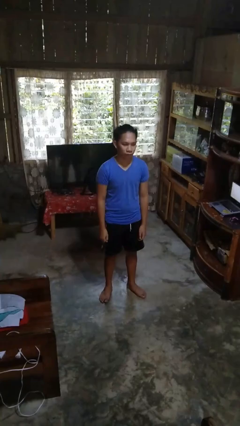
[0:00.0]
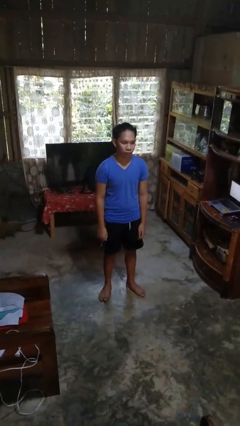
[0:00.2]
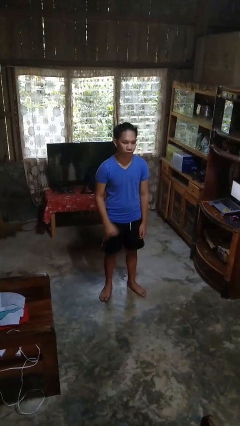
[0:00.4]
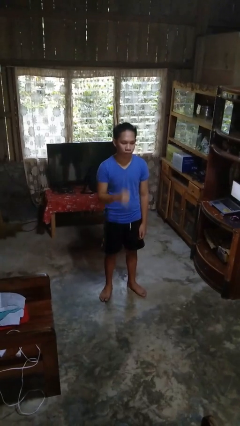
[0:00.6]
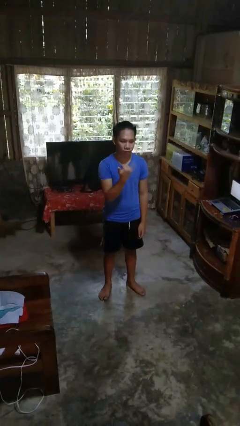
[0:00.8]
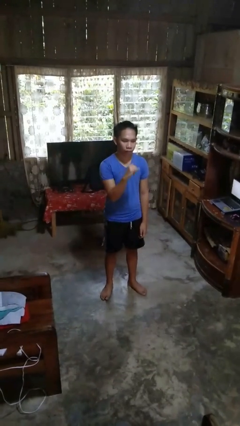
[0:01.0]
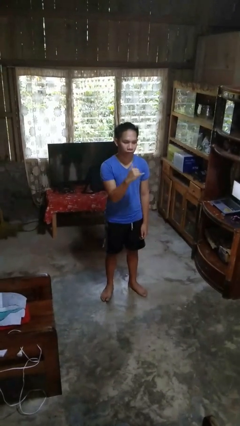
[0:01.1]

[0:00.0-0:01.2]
person gestures hang loose

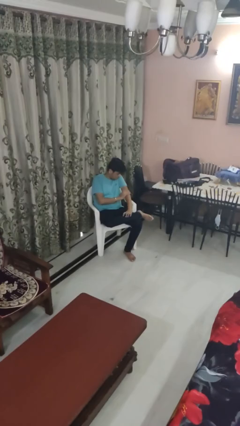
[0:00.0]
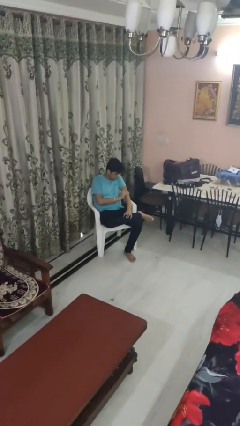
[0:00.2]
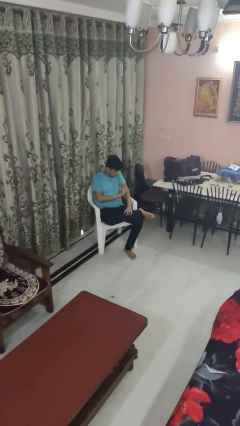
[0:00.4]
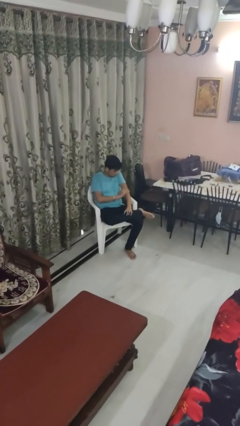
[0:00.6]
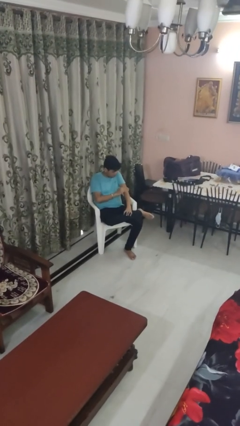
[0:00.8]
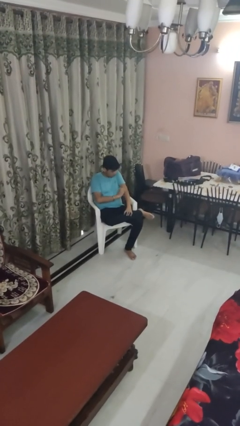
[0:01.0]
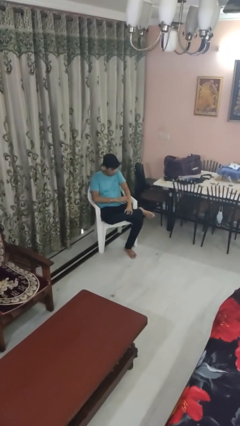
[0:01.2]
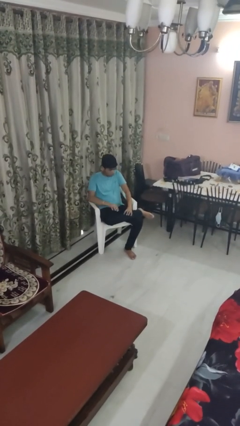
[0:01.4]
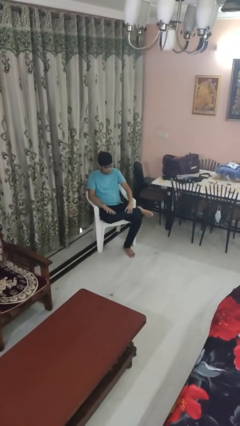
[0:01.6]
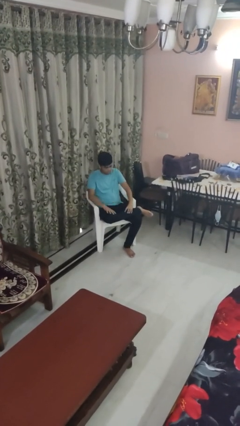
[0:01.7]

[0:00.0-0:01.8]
person swats bug

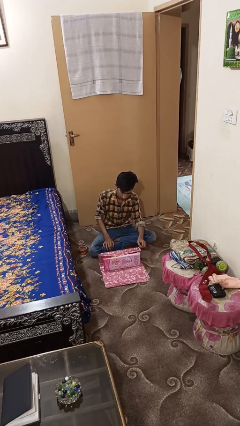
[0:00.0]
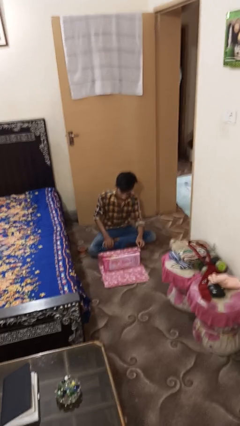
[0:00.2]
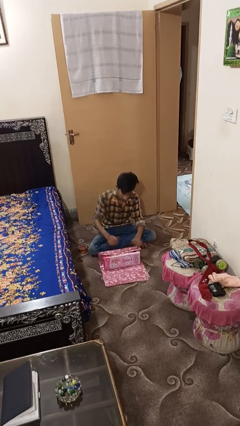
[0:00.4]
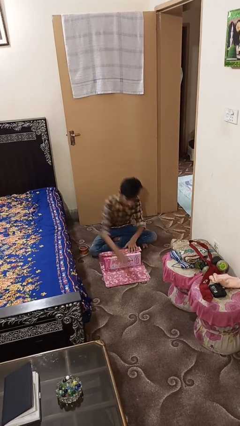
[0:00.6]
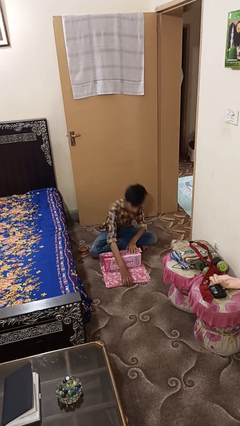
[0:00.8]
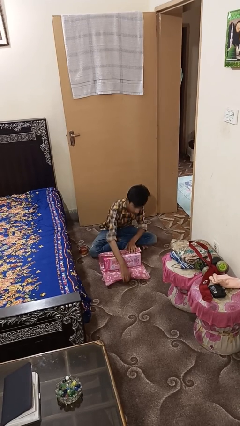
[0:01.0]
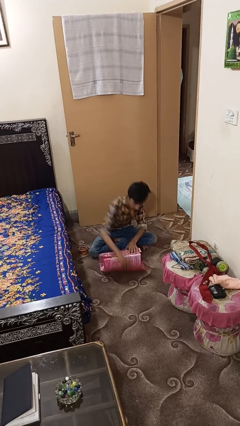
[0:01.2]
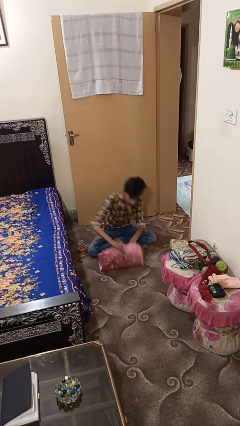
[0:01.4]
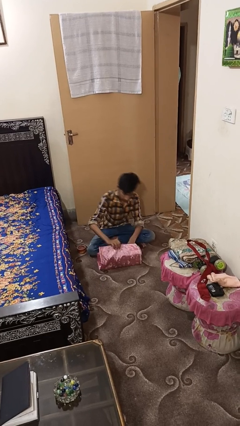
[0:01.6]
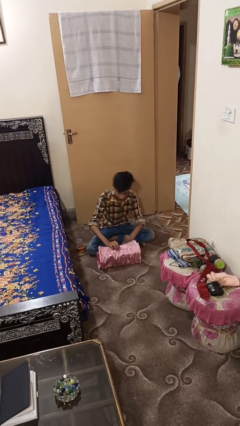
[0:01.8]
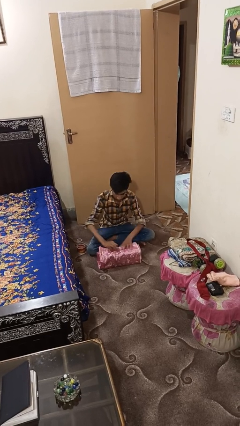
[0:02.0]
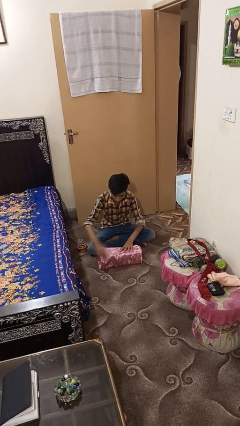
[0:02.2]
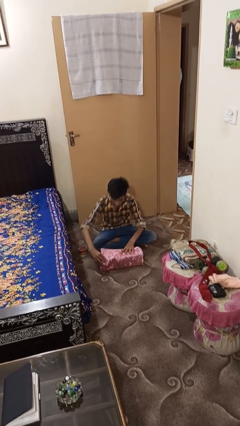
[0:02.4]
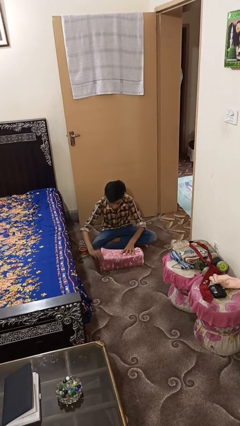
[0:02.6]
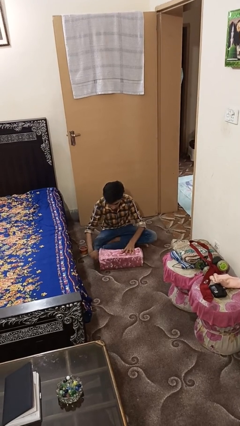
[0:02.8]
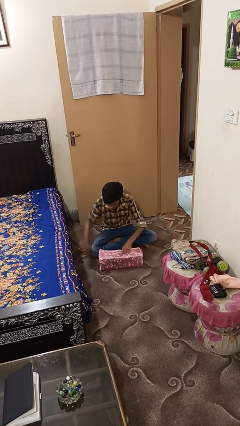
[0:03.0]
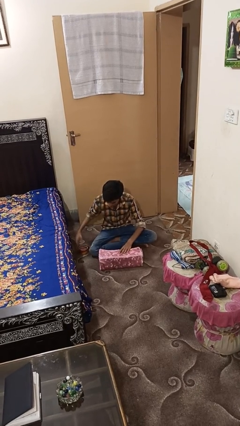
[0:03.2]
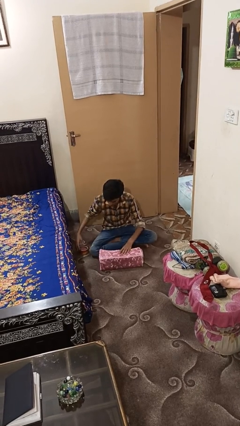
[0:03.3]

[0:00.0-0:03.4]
person wraps box

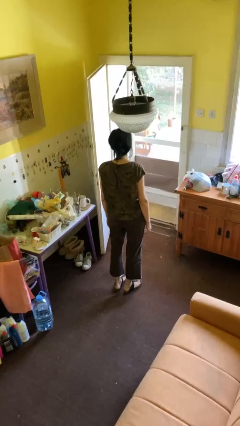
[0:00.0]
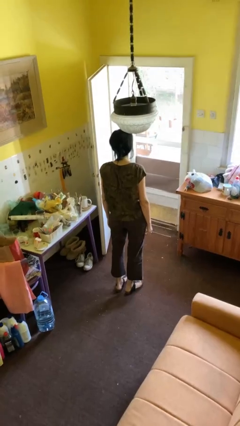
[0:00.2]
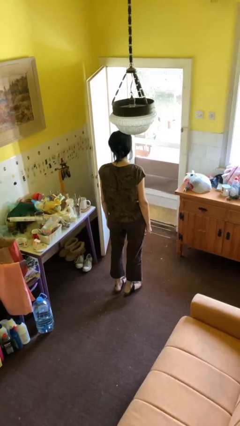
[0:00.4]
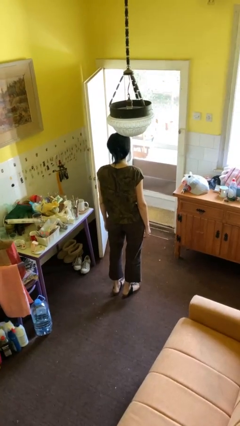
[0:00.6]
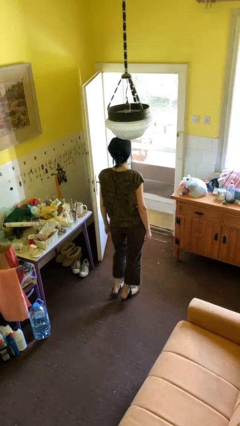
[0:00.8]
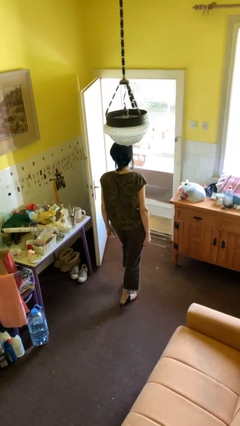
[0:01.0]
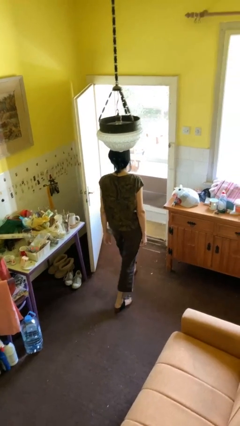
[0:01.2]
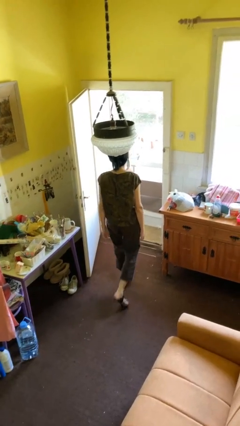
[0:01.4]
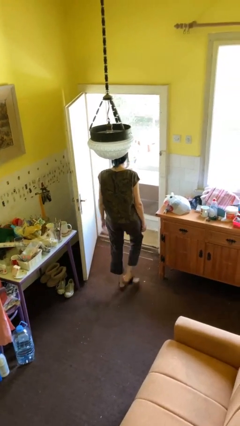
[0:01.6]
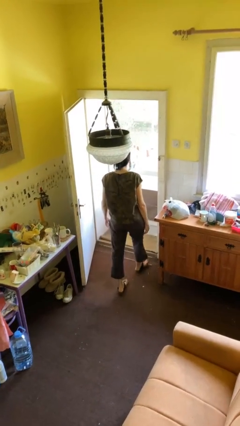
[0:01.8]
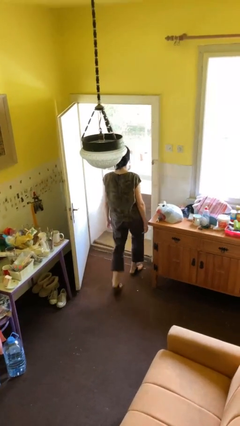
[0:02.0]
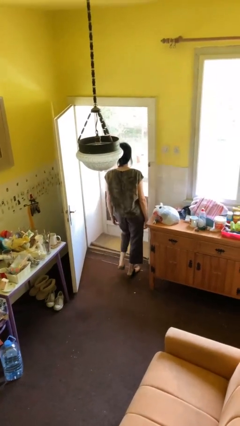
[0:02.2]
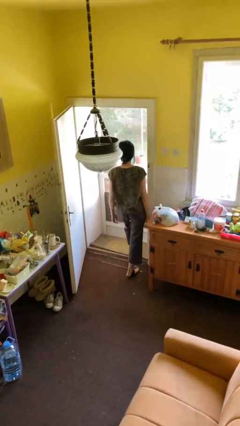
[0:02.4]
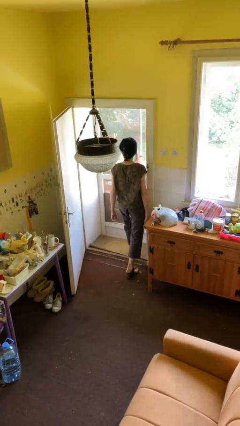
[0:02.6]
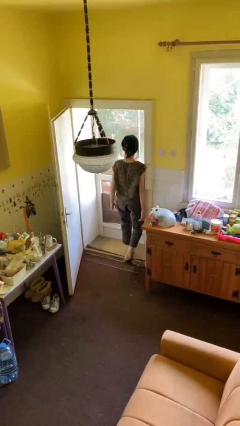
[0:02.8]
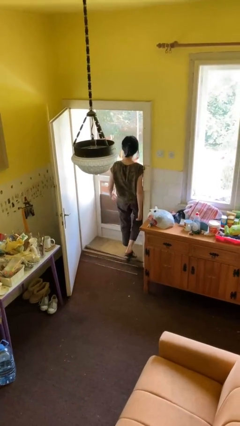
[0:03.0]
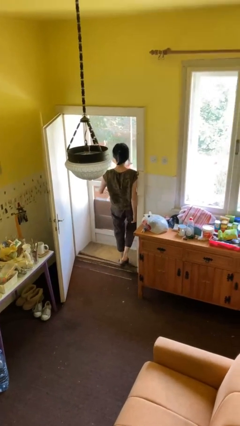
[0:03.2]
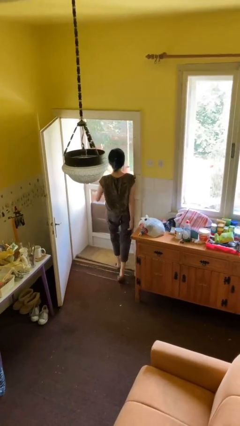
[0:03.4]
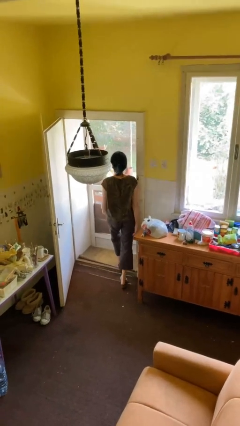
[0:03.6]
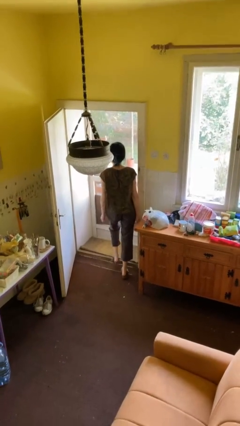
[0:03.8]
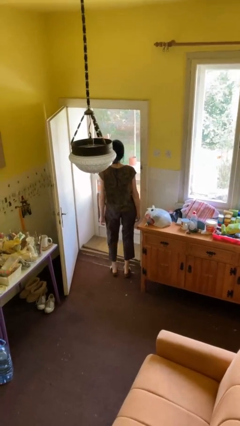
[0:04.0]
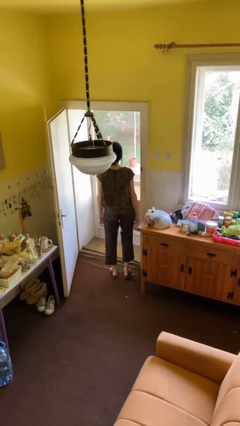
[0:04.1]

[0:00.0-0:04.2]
person bumps into wall

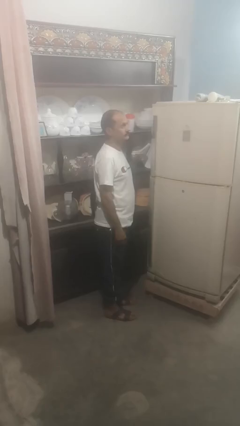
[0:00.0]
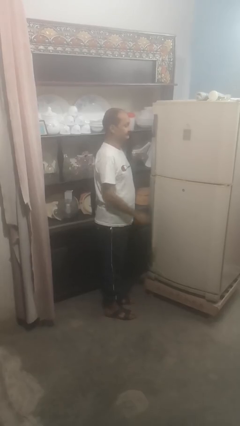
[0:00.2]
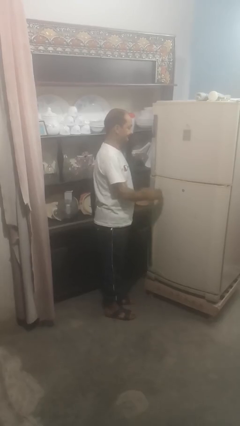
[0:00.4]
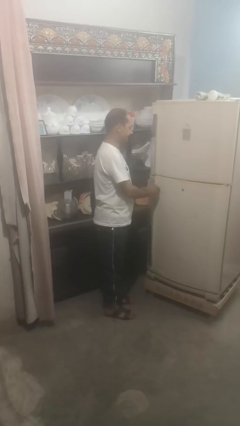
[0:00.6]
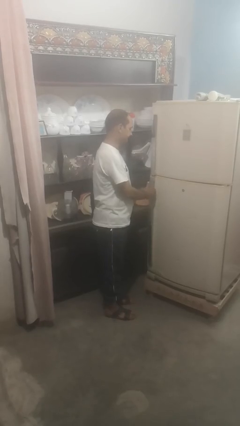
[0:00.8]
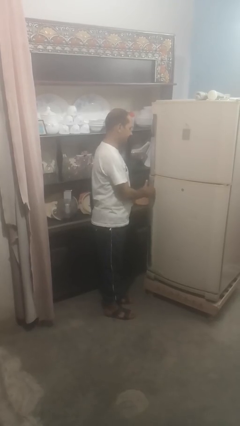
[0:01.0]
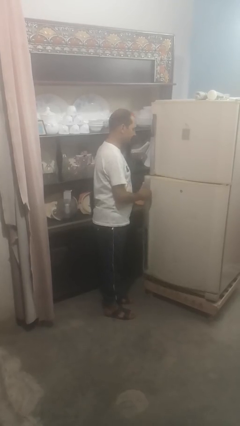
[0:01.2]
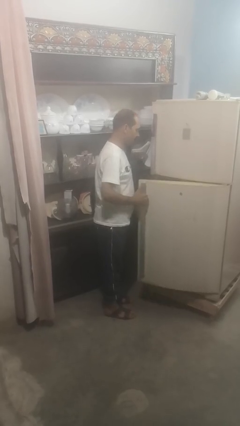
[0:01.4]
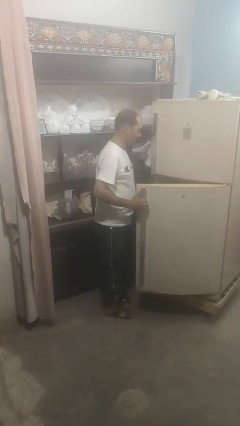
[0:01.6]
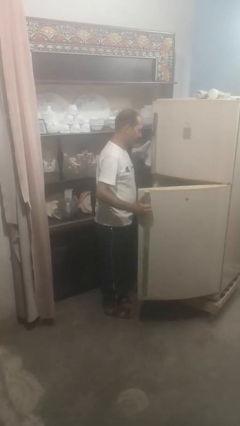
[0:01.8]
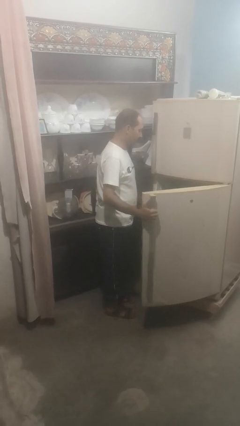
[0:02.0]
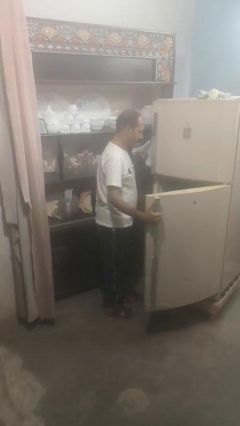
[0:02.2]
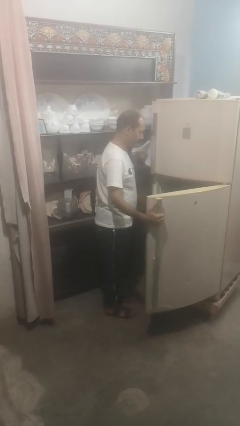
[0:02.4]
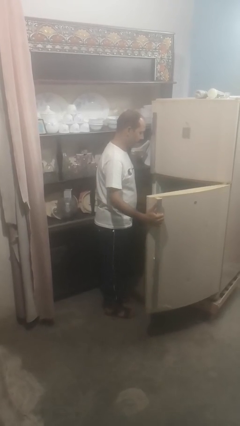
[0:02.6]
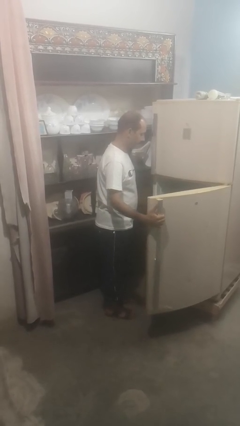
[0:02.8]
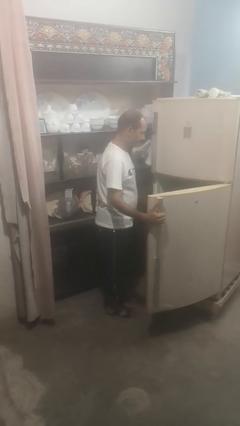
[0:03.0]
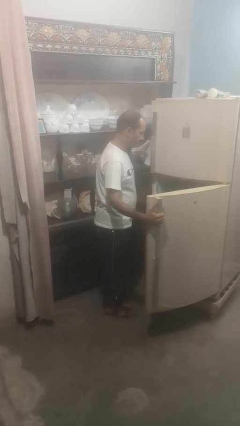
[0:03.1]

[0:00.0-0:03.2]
person opens refrigerator

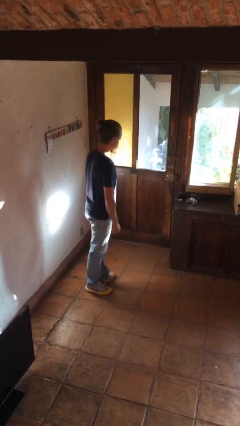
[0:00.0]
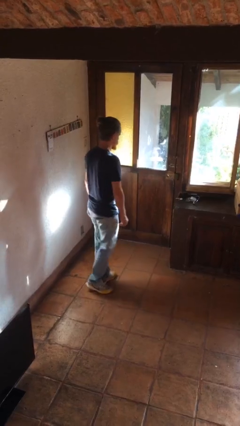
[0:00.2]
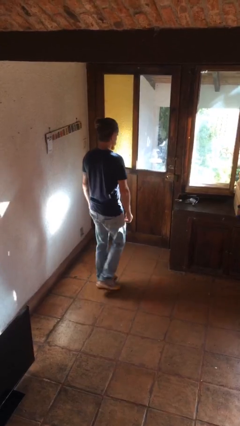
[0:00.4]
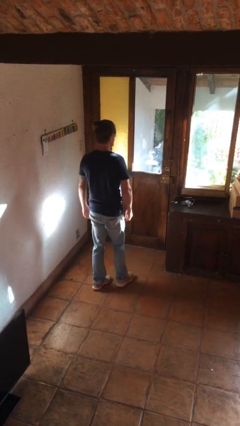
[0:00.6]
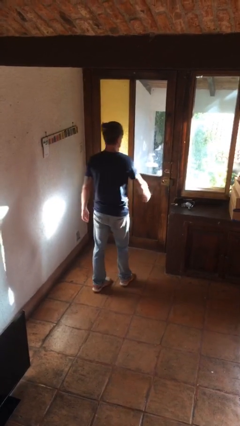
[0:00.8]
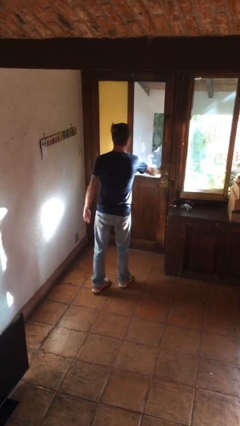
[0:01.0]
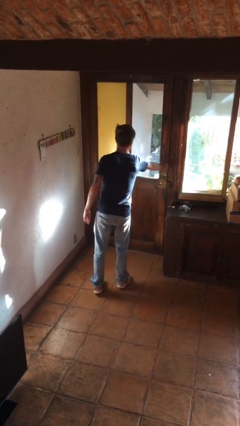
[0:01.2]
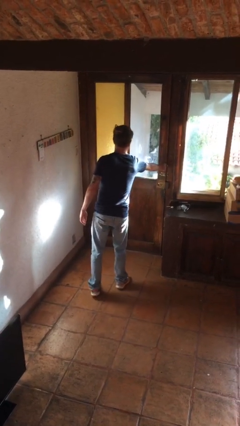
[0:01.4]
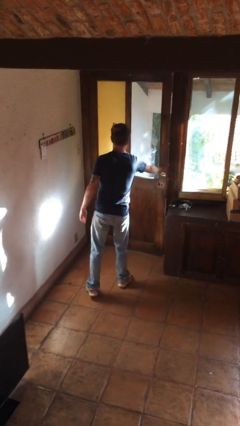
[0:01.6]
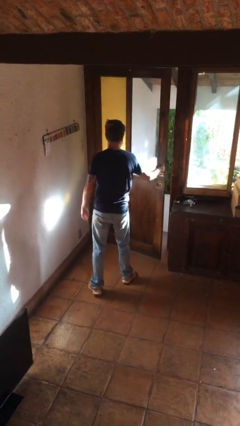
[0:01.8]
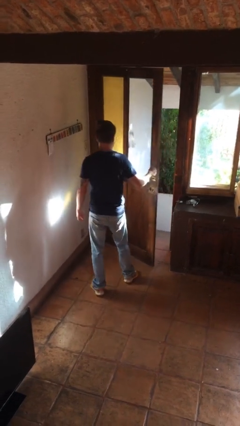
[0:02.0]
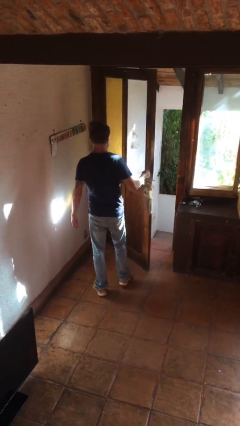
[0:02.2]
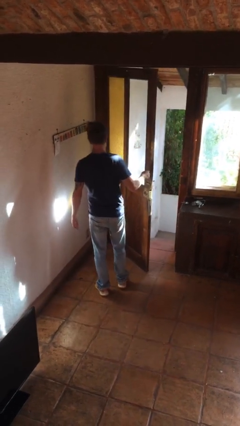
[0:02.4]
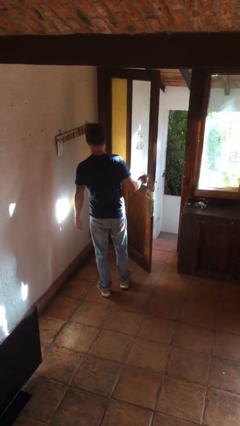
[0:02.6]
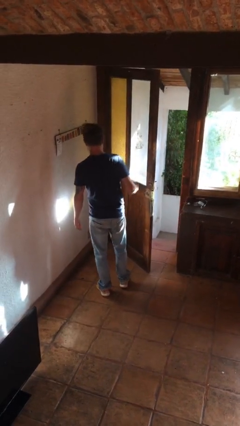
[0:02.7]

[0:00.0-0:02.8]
person opens facility door

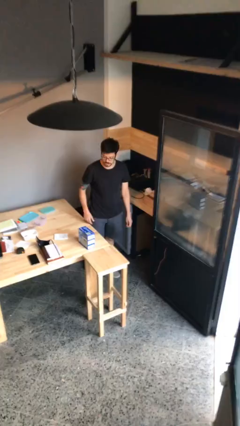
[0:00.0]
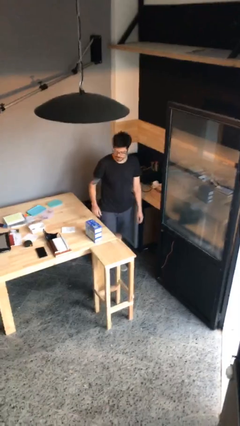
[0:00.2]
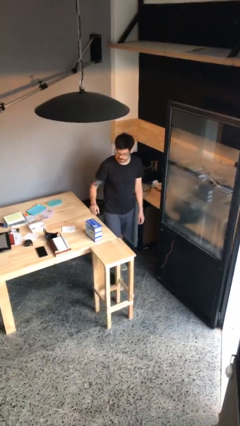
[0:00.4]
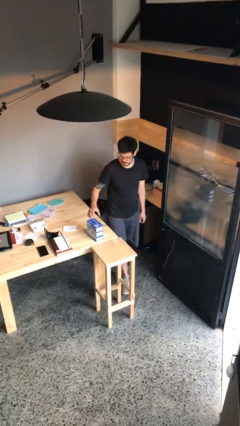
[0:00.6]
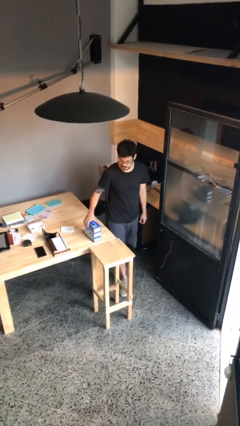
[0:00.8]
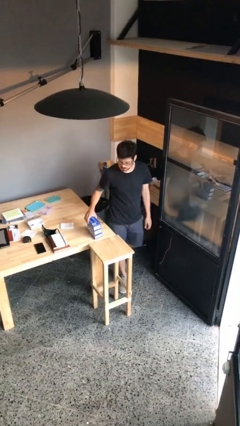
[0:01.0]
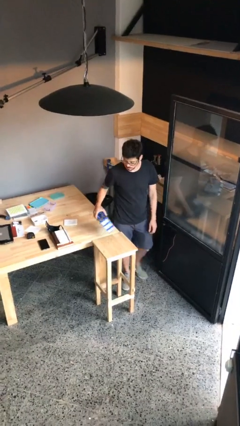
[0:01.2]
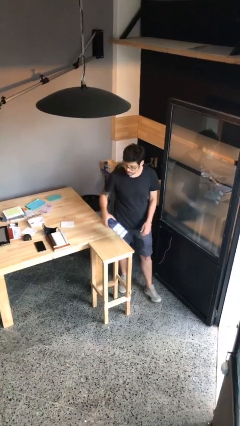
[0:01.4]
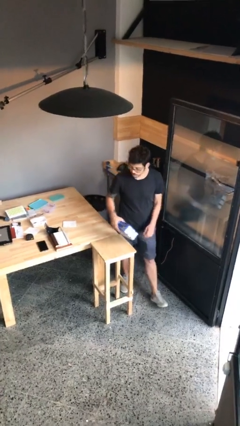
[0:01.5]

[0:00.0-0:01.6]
person picks up object from table
